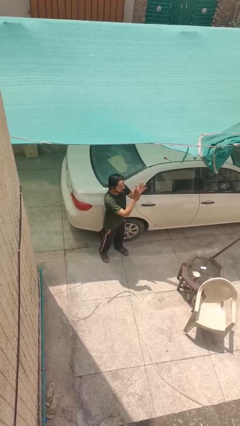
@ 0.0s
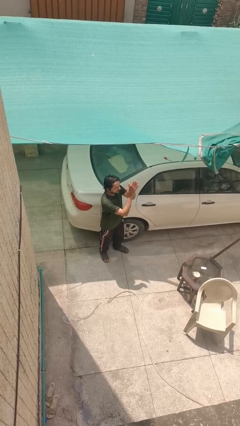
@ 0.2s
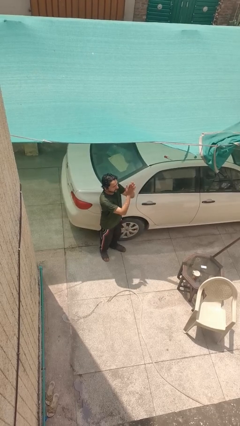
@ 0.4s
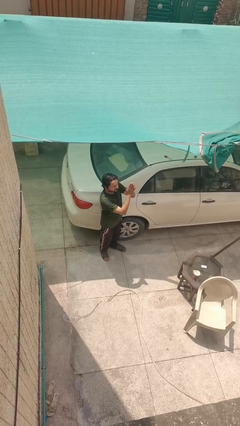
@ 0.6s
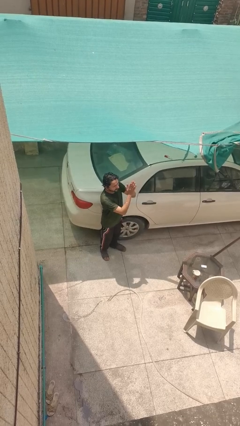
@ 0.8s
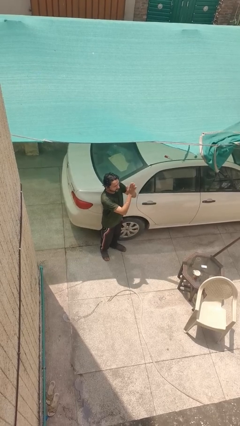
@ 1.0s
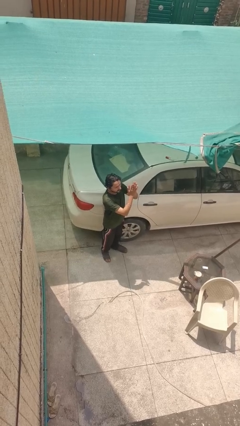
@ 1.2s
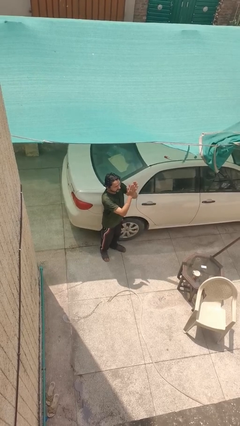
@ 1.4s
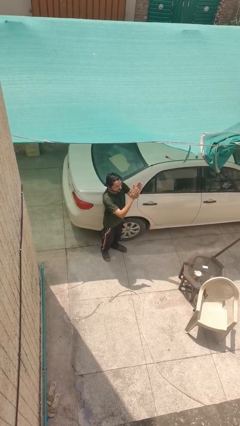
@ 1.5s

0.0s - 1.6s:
person claps hands

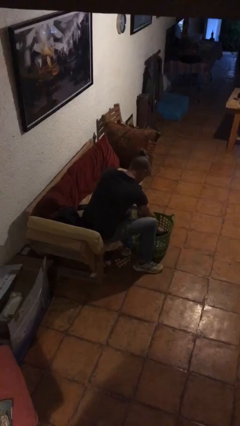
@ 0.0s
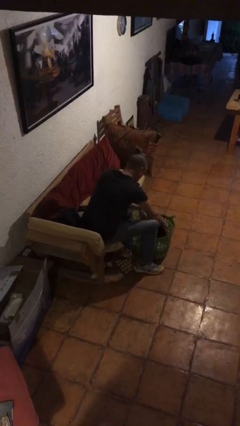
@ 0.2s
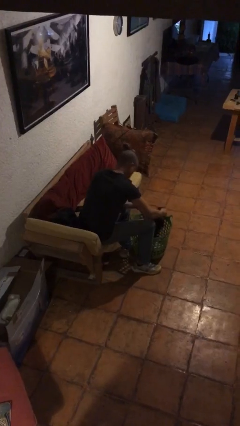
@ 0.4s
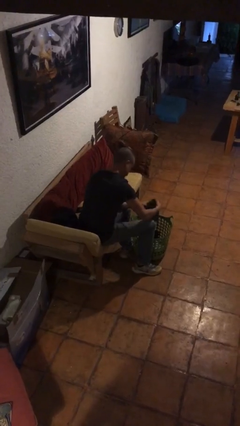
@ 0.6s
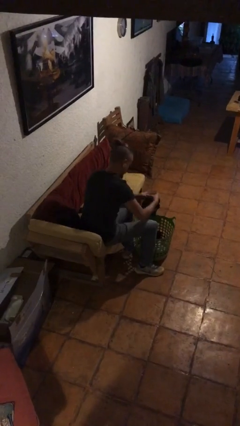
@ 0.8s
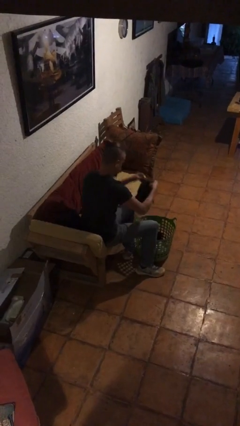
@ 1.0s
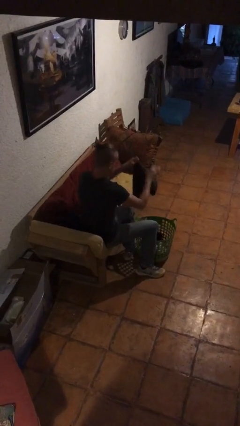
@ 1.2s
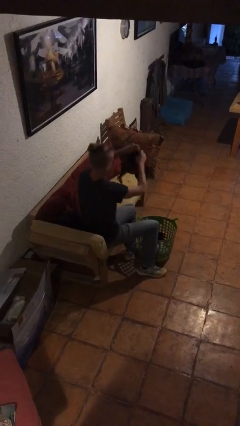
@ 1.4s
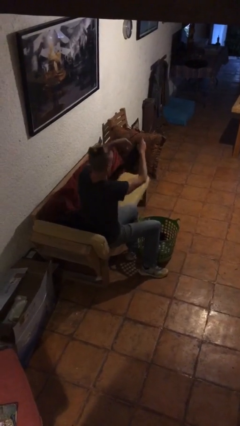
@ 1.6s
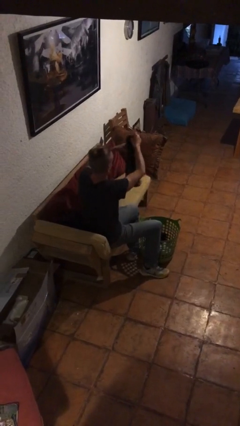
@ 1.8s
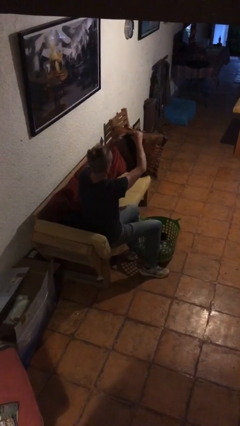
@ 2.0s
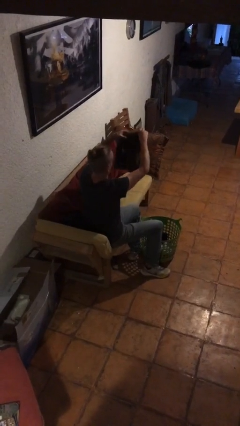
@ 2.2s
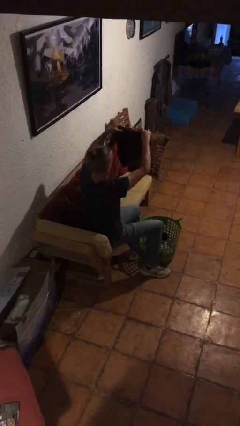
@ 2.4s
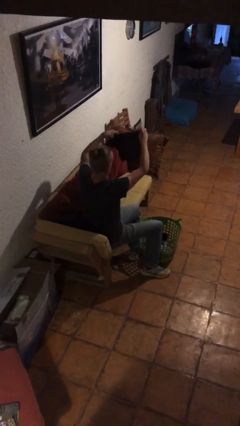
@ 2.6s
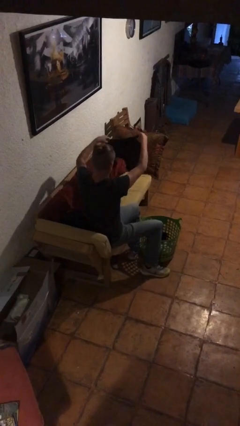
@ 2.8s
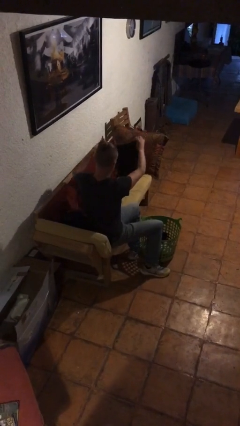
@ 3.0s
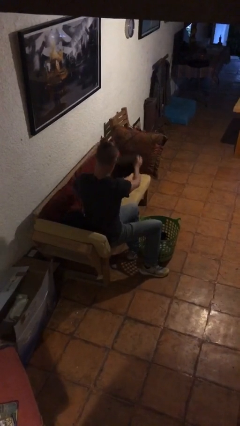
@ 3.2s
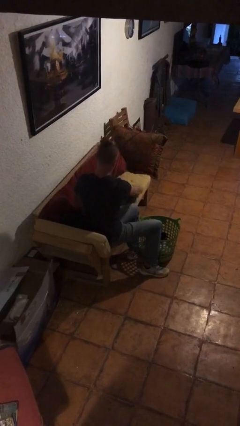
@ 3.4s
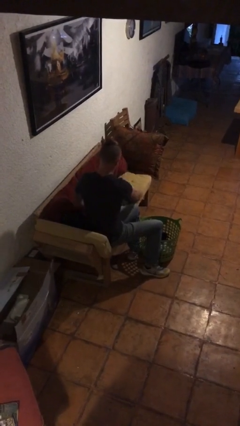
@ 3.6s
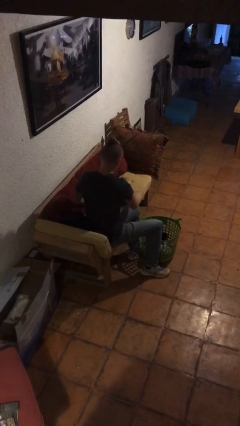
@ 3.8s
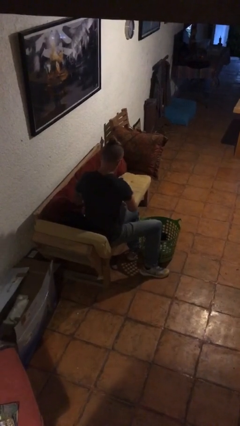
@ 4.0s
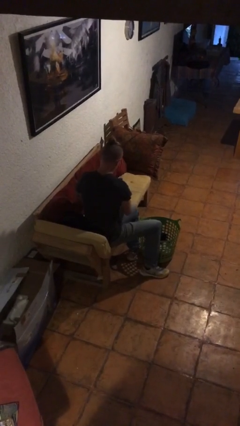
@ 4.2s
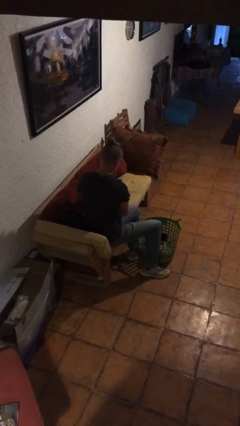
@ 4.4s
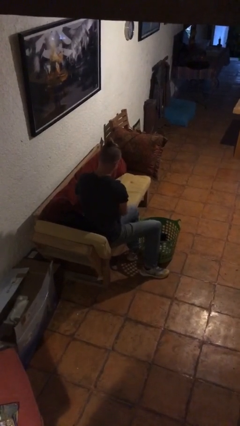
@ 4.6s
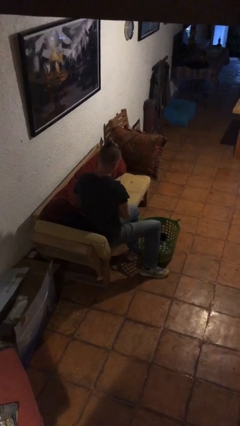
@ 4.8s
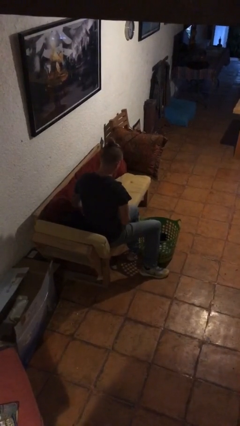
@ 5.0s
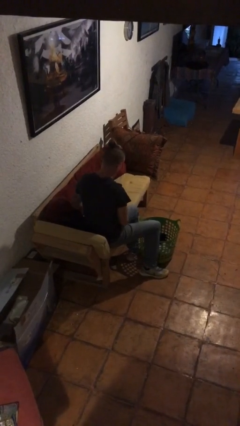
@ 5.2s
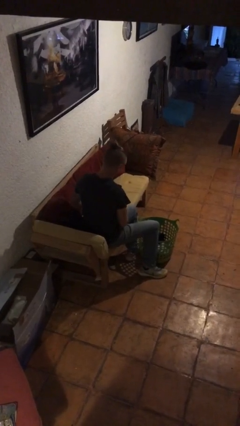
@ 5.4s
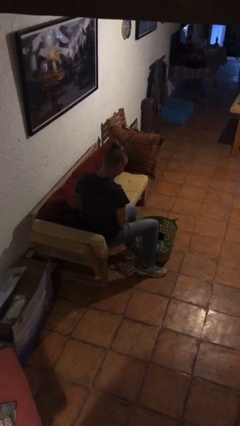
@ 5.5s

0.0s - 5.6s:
person folds shirt

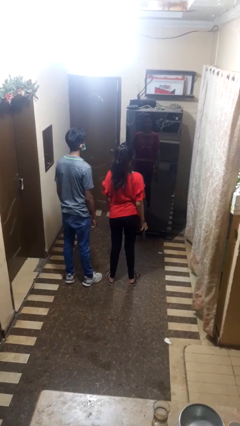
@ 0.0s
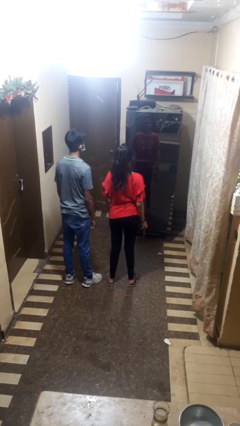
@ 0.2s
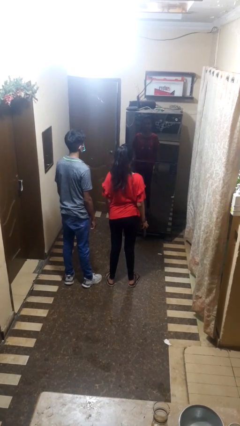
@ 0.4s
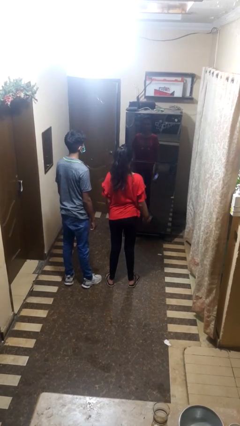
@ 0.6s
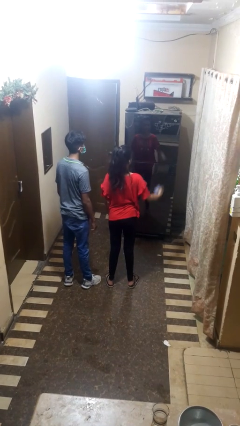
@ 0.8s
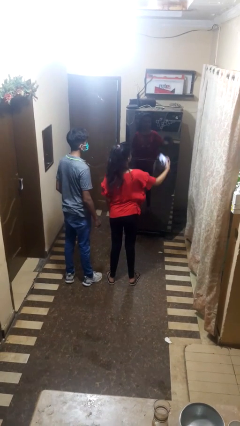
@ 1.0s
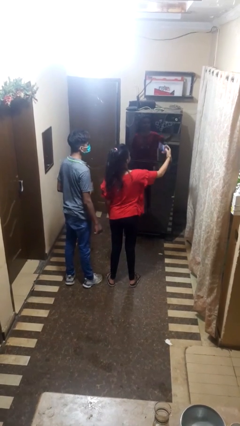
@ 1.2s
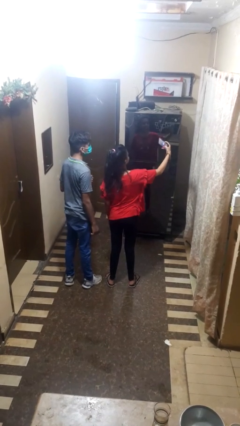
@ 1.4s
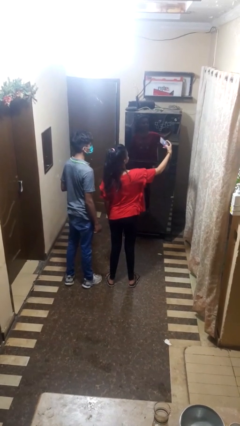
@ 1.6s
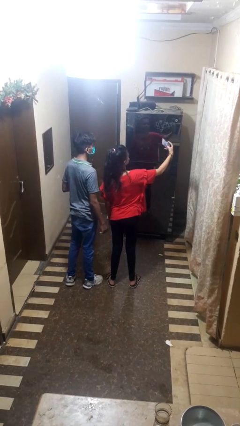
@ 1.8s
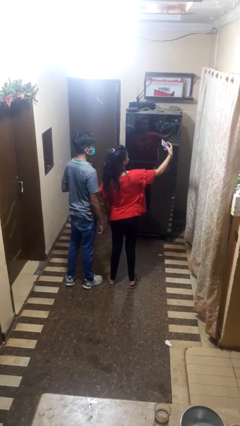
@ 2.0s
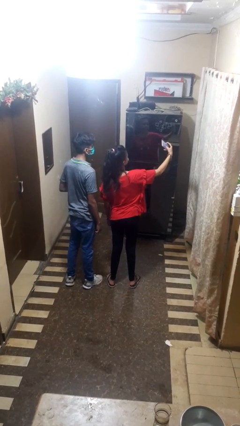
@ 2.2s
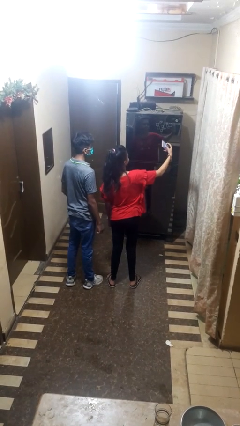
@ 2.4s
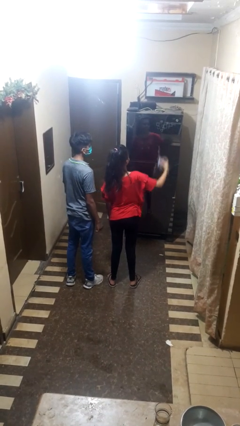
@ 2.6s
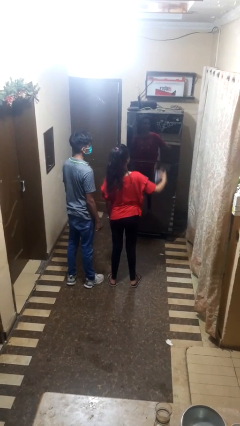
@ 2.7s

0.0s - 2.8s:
person takes selfie with person

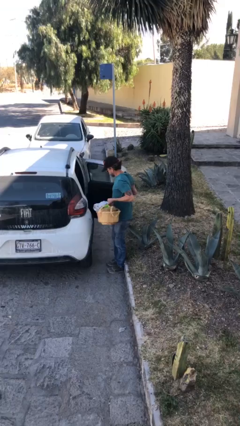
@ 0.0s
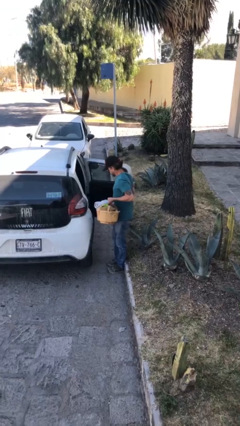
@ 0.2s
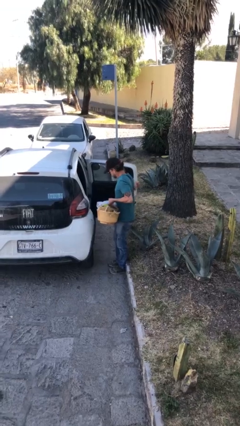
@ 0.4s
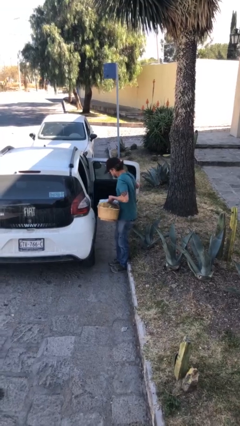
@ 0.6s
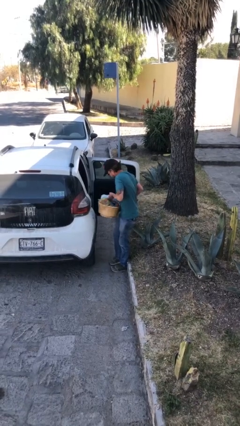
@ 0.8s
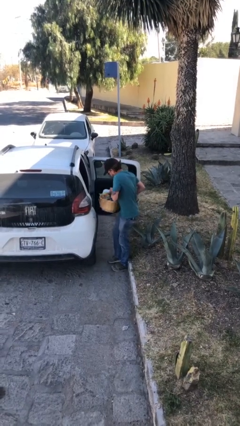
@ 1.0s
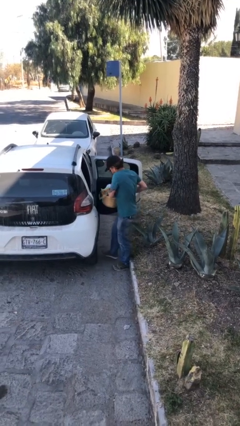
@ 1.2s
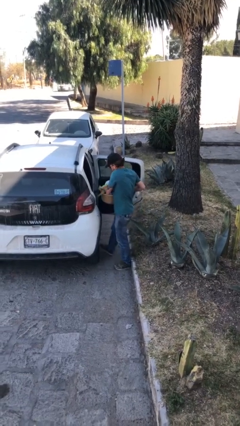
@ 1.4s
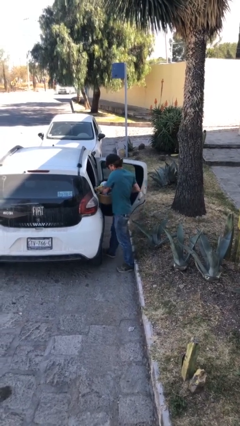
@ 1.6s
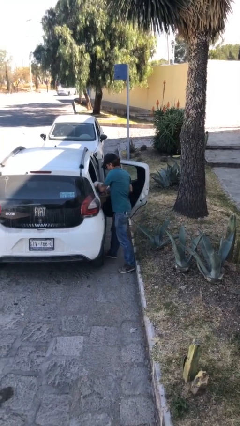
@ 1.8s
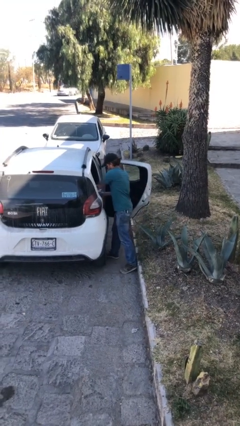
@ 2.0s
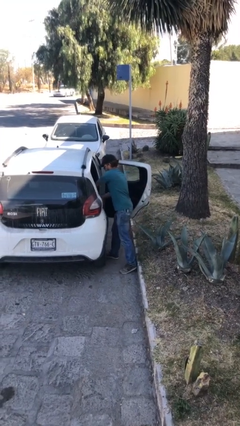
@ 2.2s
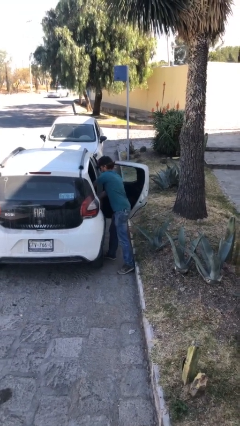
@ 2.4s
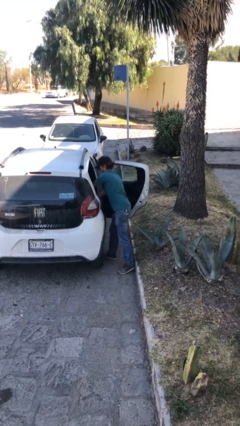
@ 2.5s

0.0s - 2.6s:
person loads car

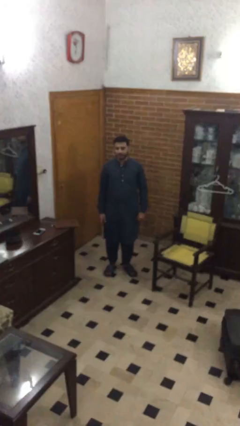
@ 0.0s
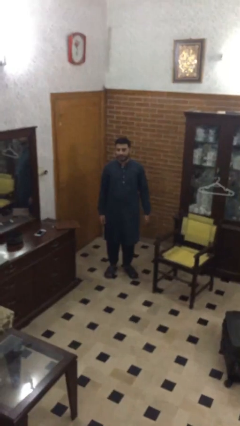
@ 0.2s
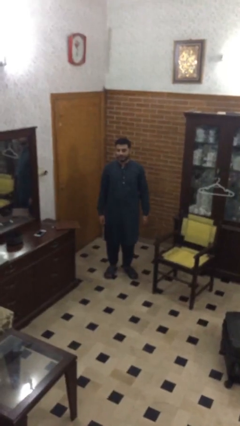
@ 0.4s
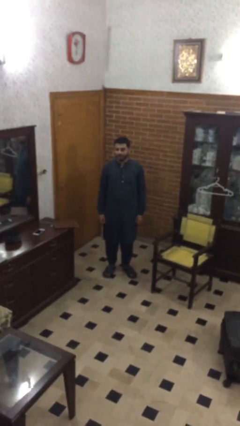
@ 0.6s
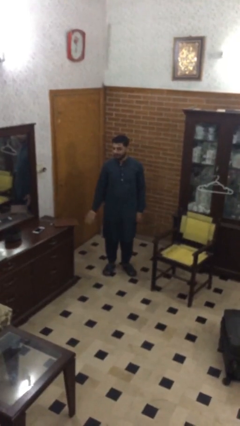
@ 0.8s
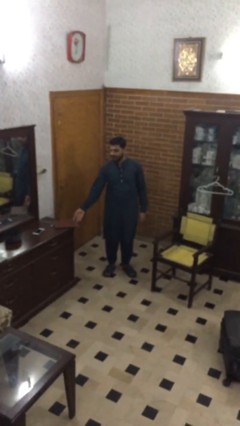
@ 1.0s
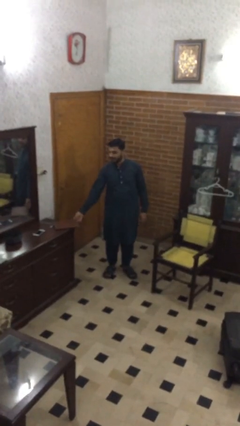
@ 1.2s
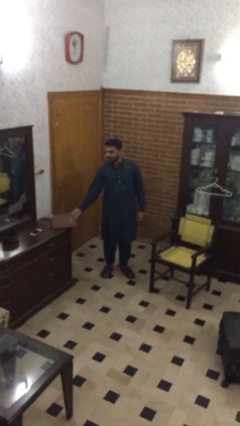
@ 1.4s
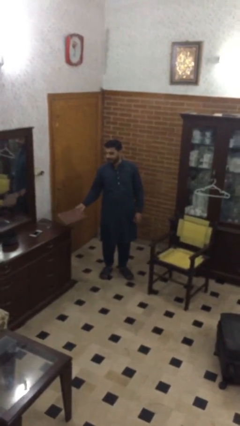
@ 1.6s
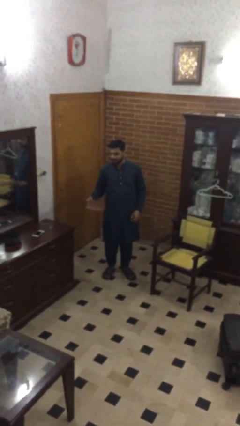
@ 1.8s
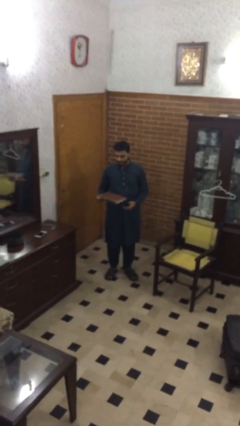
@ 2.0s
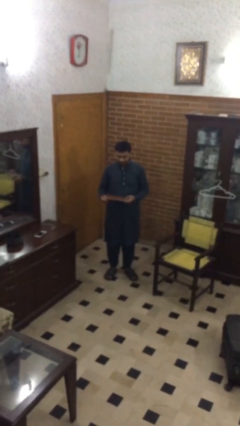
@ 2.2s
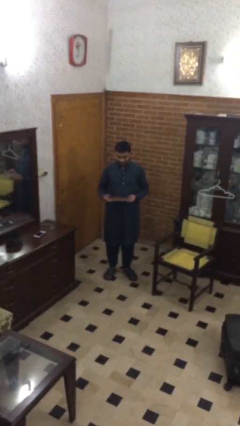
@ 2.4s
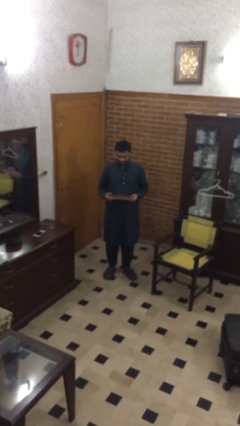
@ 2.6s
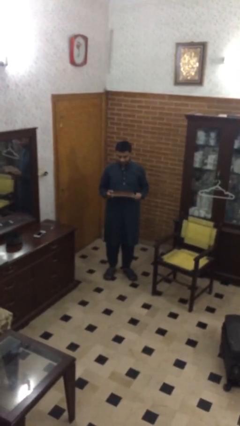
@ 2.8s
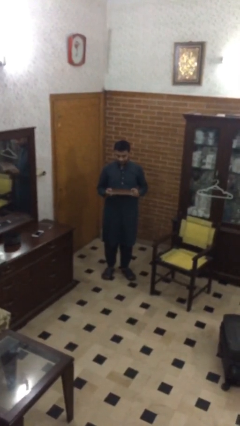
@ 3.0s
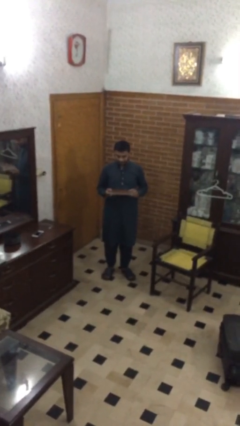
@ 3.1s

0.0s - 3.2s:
person picks up object from table

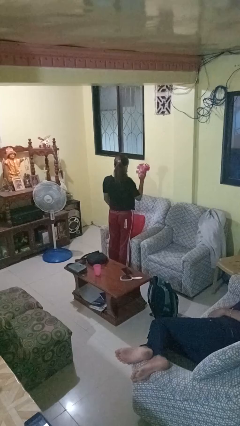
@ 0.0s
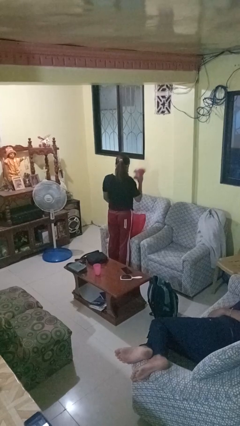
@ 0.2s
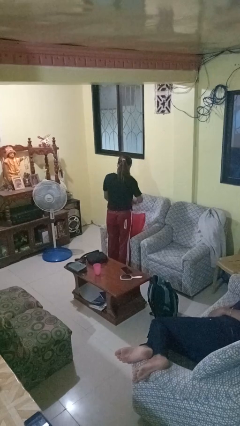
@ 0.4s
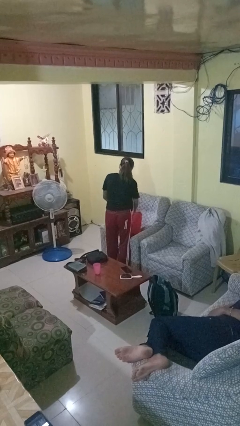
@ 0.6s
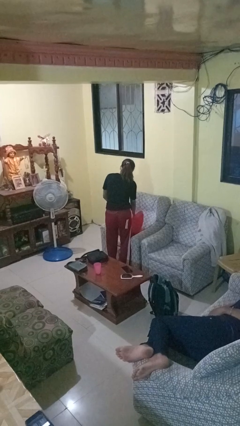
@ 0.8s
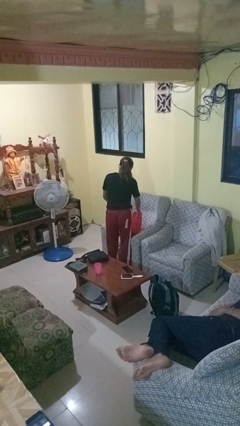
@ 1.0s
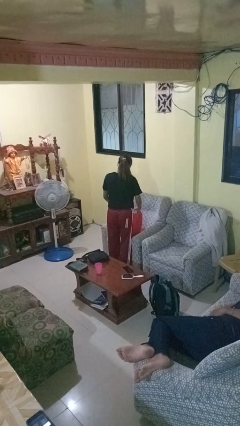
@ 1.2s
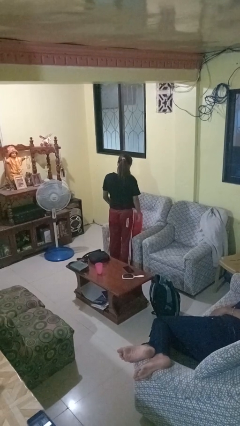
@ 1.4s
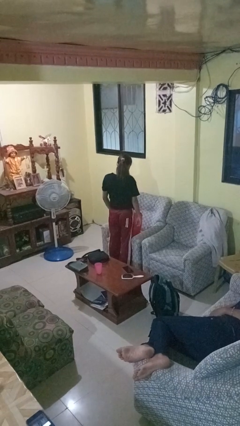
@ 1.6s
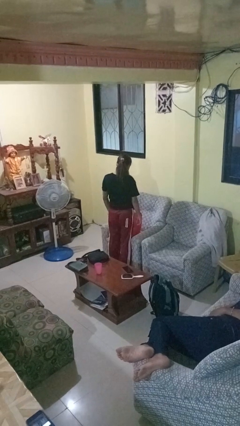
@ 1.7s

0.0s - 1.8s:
person puts object into bag
